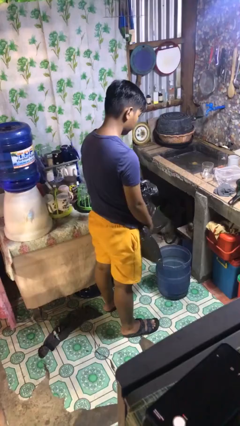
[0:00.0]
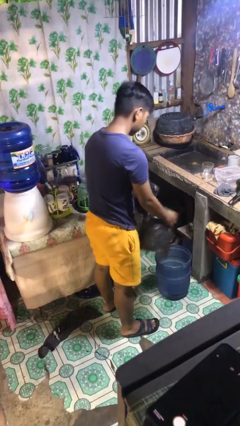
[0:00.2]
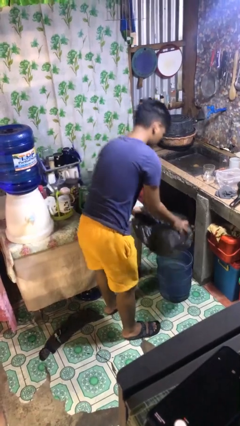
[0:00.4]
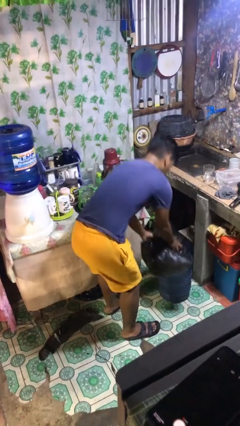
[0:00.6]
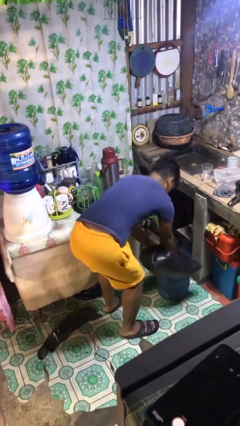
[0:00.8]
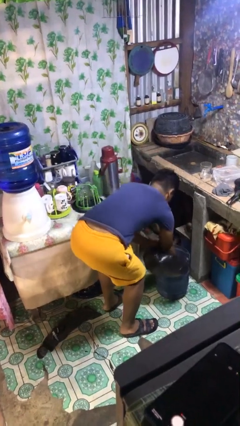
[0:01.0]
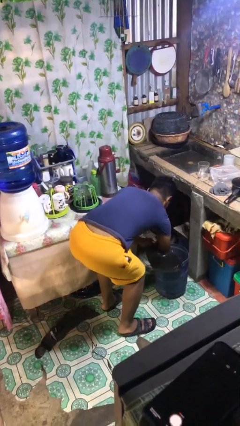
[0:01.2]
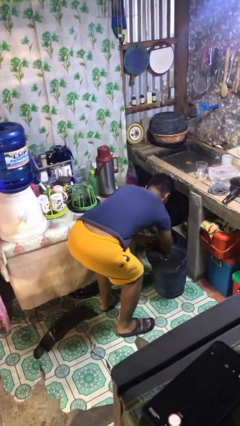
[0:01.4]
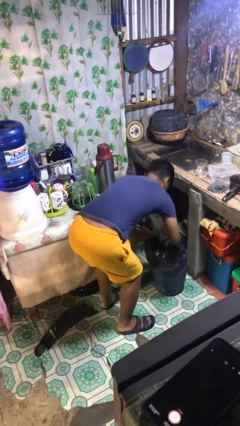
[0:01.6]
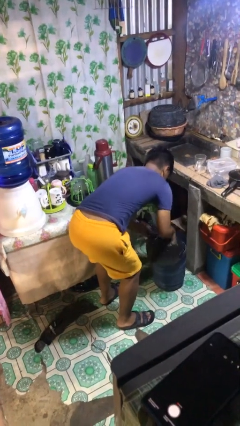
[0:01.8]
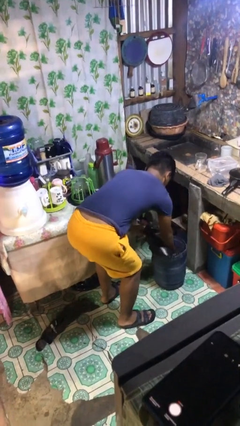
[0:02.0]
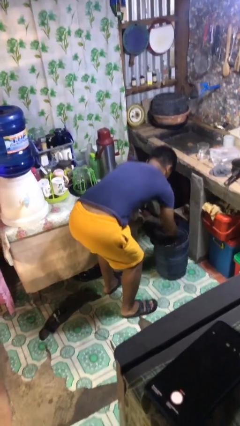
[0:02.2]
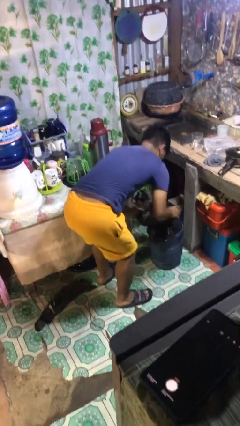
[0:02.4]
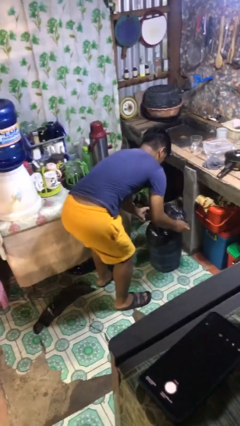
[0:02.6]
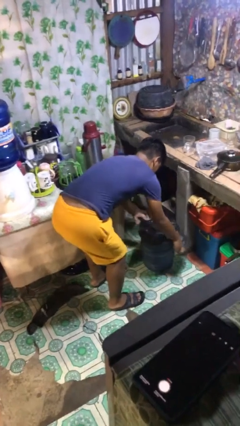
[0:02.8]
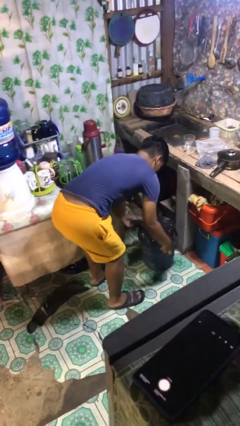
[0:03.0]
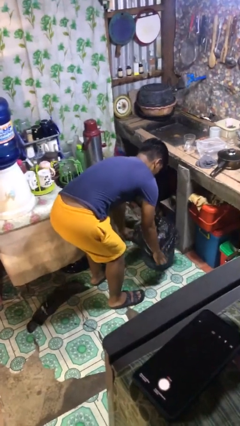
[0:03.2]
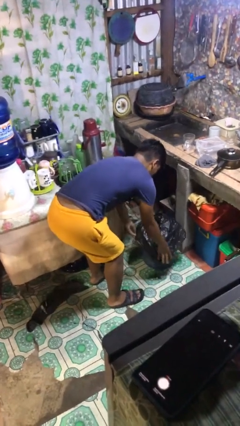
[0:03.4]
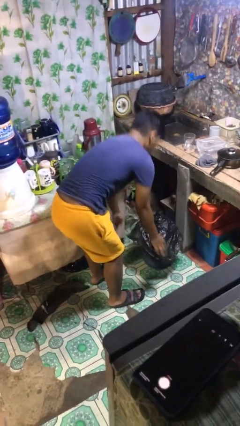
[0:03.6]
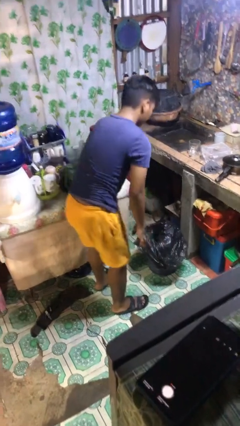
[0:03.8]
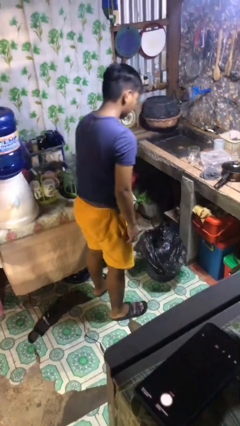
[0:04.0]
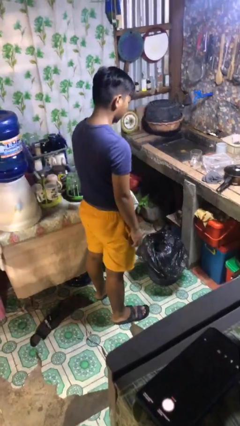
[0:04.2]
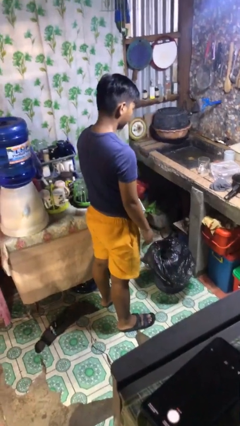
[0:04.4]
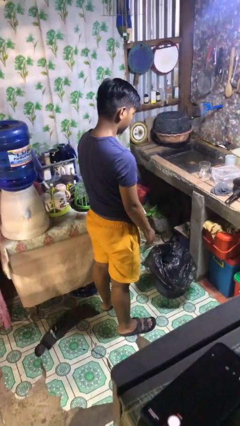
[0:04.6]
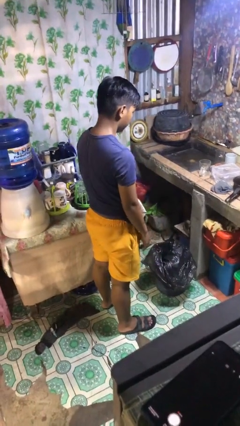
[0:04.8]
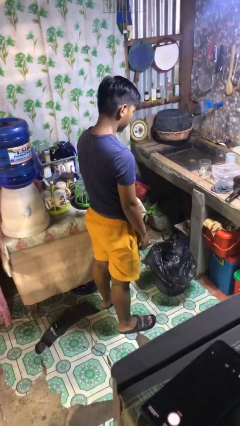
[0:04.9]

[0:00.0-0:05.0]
person inserts trashbag into trashcan

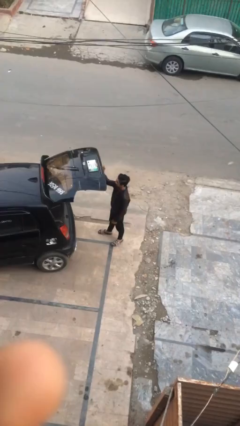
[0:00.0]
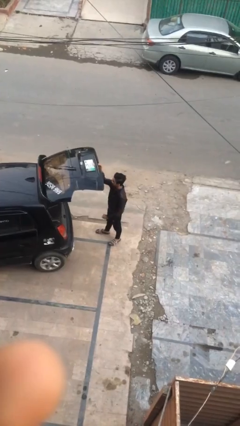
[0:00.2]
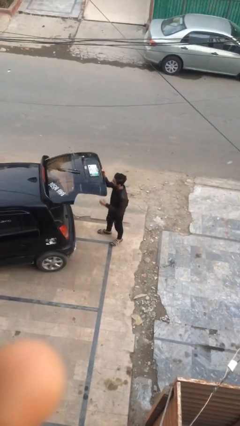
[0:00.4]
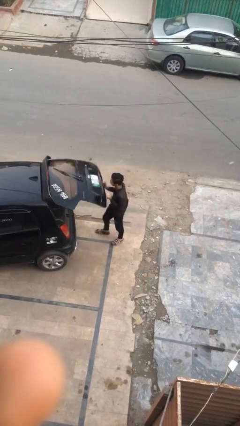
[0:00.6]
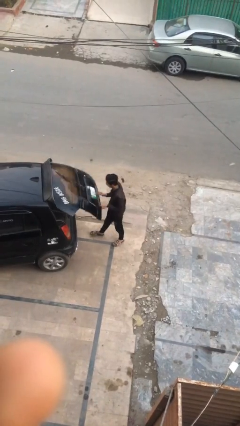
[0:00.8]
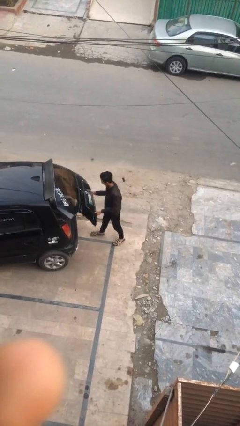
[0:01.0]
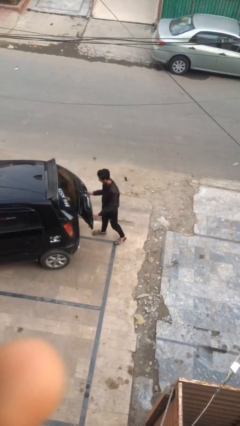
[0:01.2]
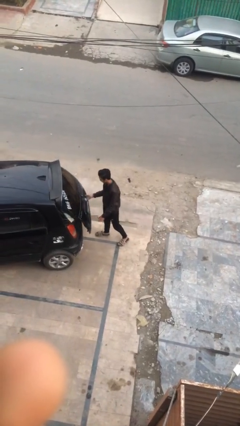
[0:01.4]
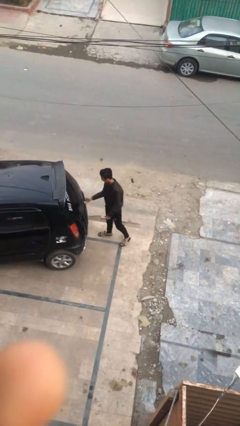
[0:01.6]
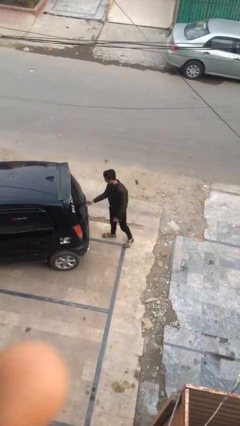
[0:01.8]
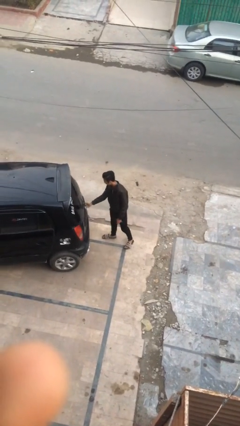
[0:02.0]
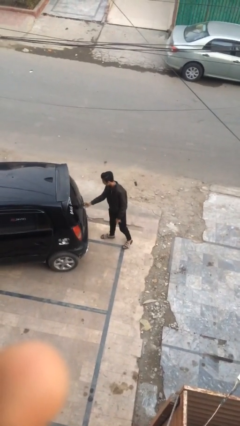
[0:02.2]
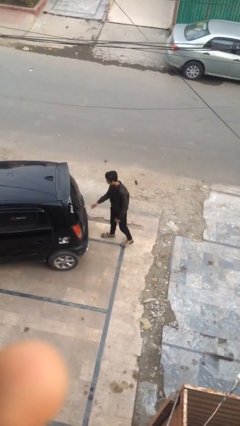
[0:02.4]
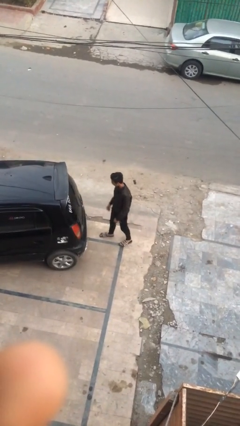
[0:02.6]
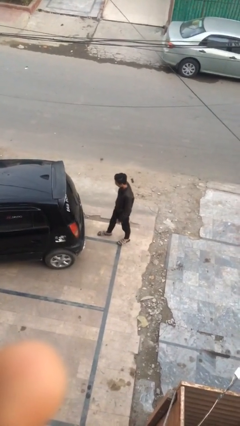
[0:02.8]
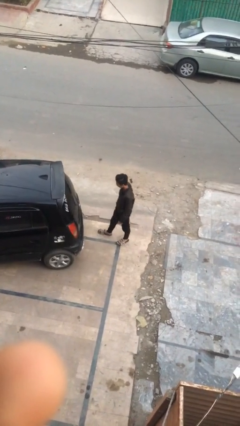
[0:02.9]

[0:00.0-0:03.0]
person closes car trunk

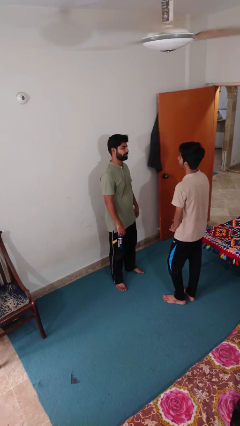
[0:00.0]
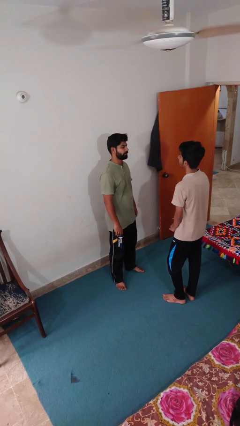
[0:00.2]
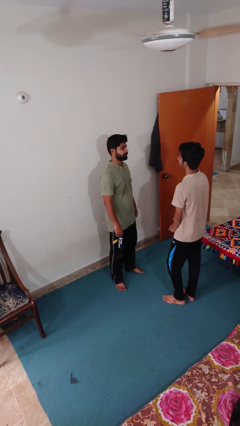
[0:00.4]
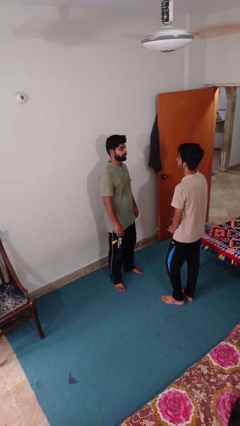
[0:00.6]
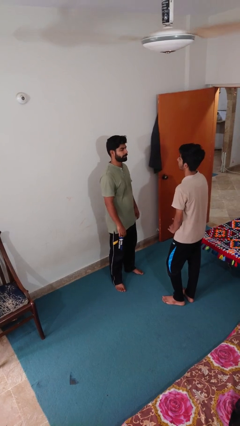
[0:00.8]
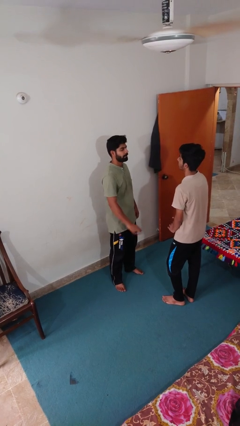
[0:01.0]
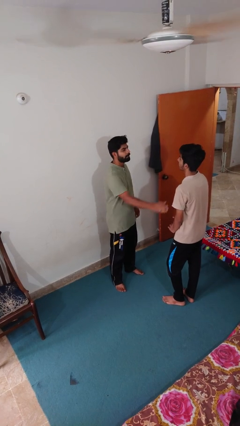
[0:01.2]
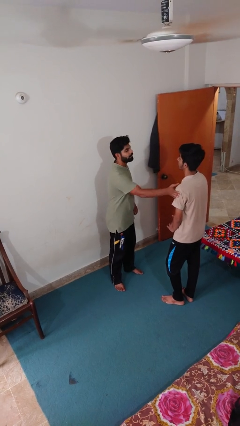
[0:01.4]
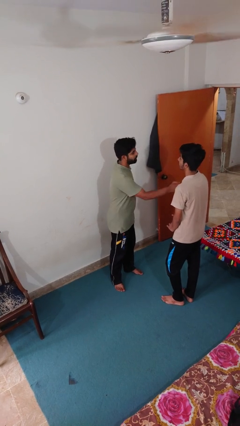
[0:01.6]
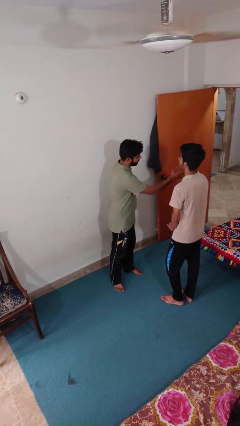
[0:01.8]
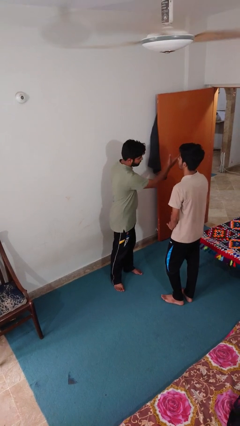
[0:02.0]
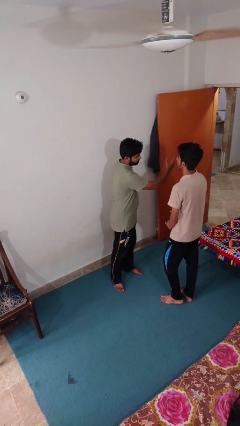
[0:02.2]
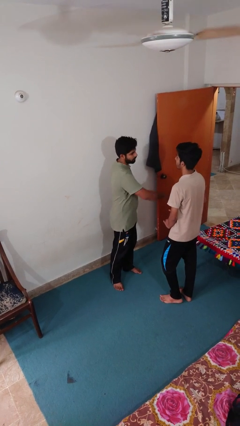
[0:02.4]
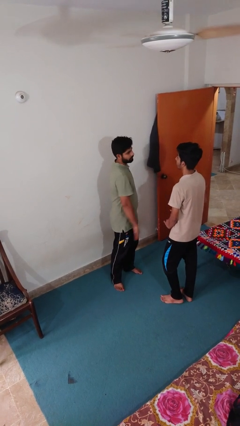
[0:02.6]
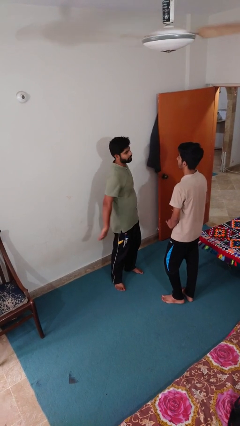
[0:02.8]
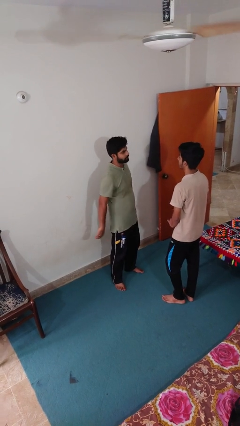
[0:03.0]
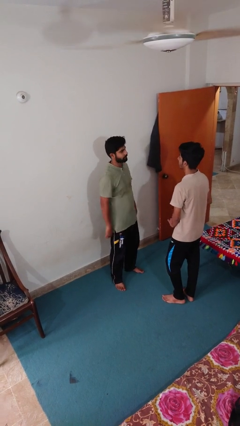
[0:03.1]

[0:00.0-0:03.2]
person shoves person

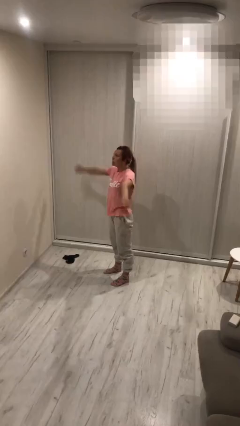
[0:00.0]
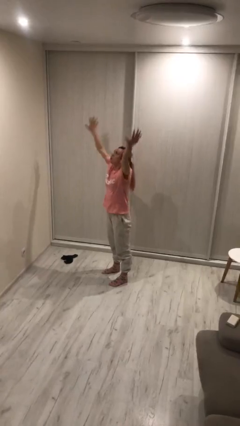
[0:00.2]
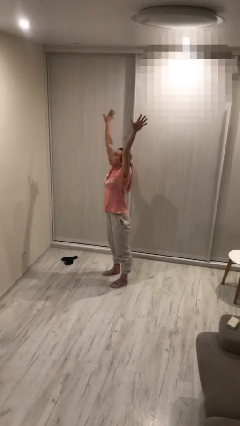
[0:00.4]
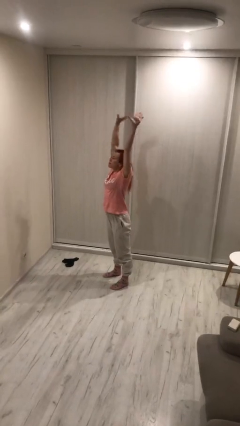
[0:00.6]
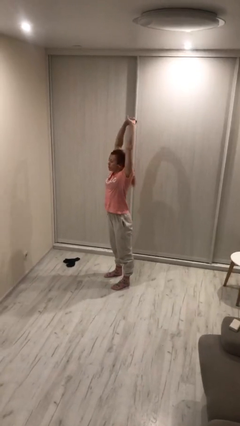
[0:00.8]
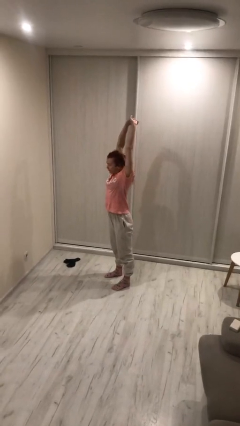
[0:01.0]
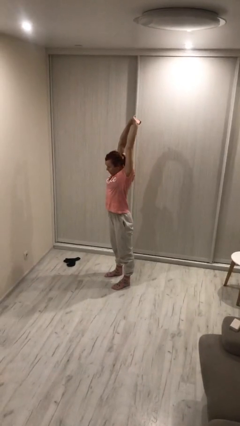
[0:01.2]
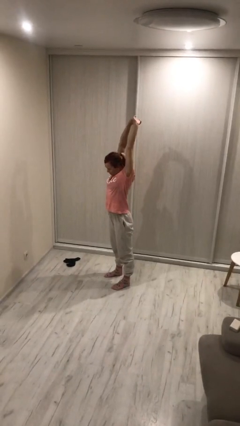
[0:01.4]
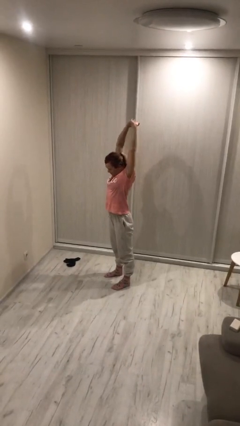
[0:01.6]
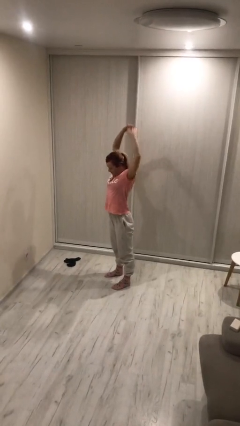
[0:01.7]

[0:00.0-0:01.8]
person stretches arms over head

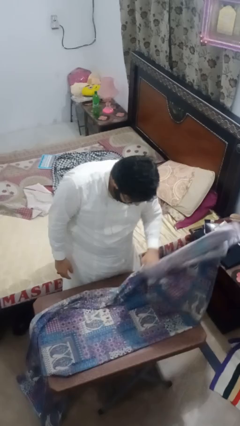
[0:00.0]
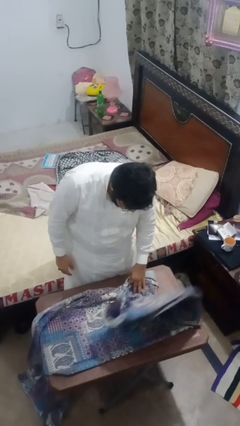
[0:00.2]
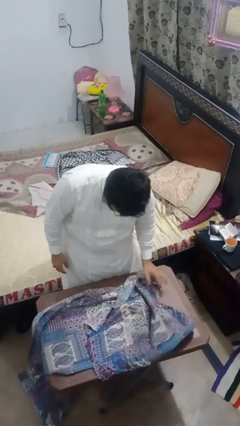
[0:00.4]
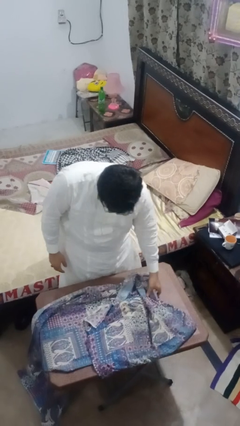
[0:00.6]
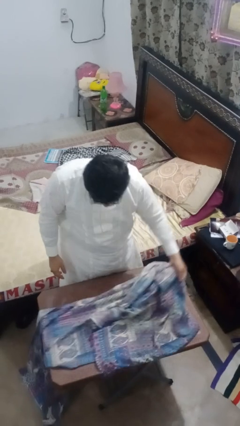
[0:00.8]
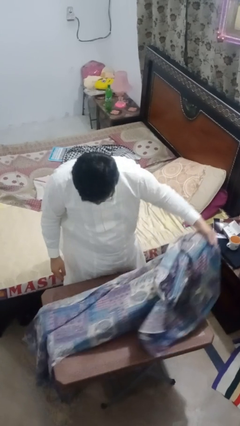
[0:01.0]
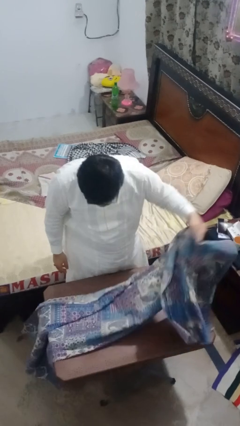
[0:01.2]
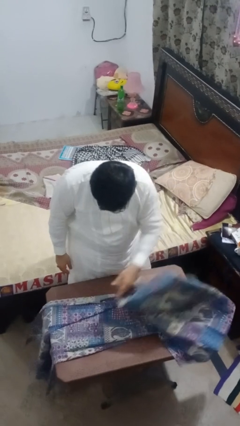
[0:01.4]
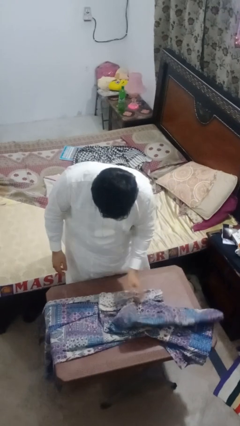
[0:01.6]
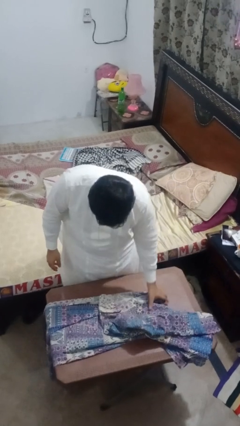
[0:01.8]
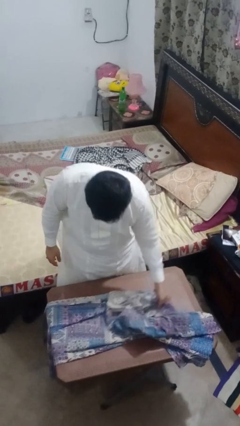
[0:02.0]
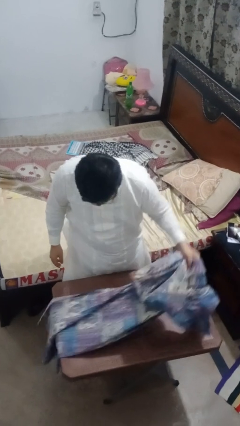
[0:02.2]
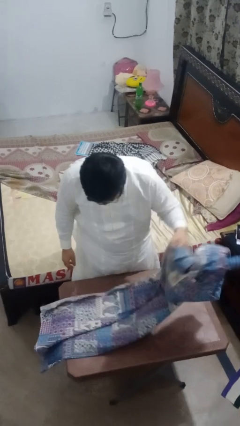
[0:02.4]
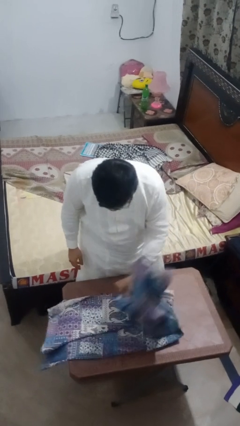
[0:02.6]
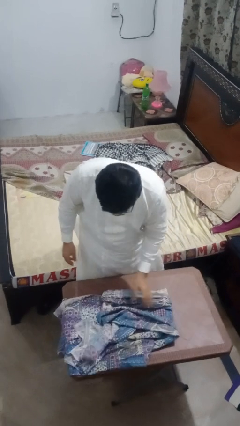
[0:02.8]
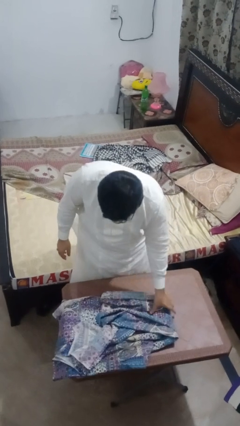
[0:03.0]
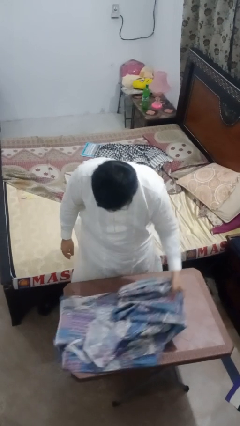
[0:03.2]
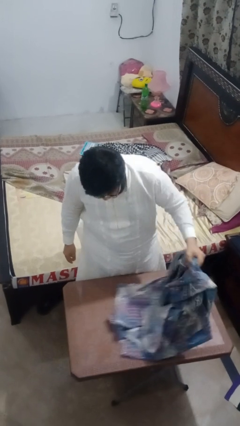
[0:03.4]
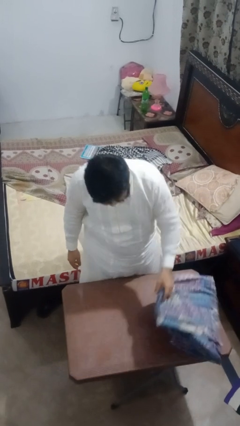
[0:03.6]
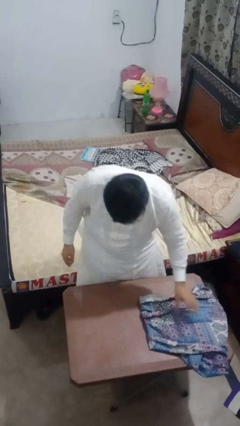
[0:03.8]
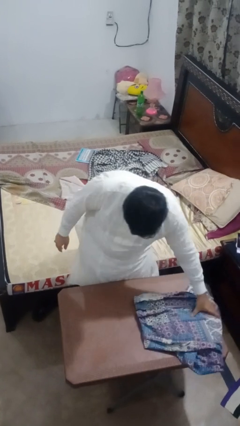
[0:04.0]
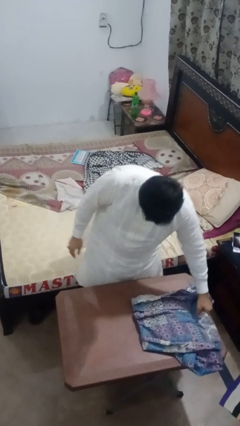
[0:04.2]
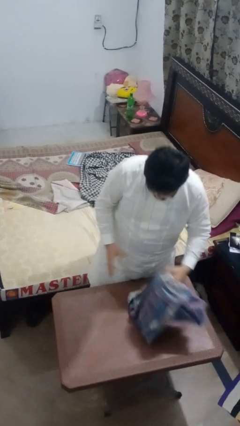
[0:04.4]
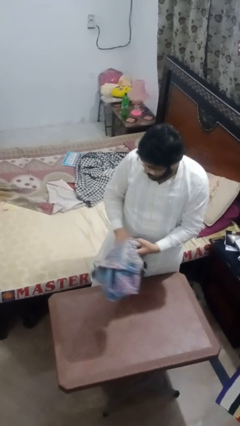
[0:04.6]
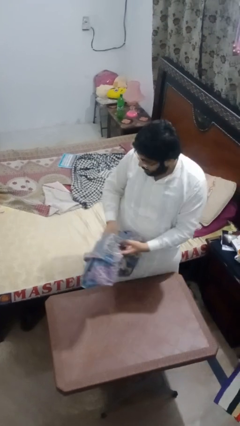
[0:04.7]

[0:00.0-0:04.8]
person folds tablecloth
